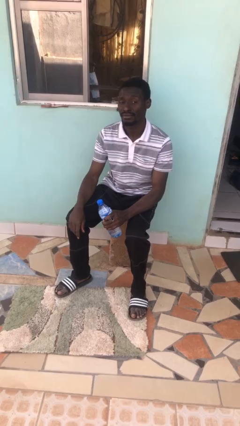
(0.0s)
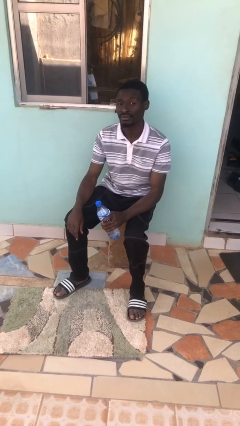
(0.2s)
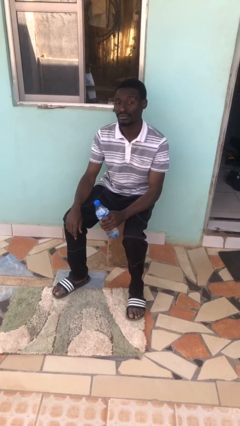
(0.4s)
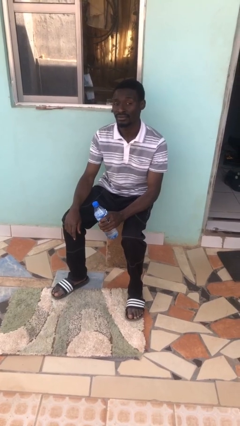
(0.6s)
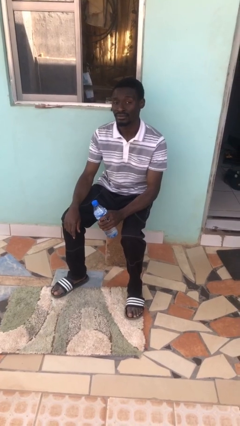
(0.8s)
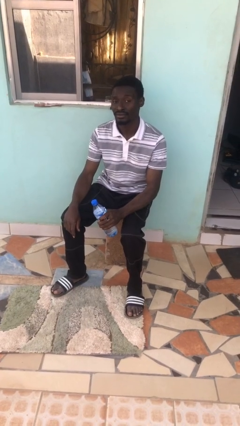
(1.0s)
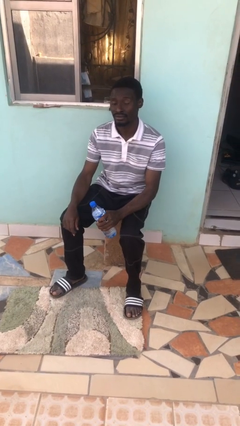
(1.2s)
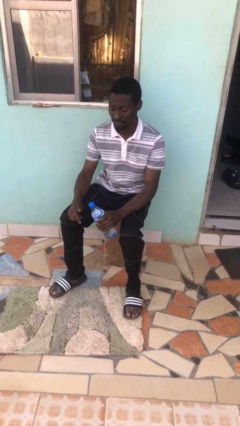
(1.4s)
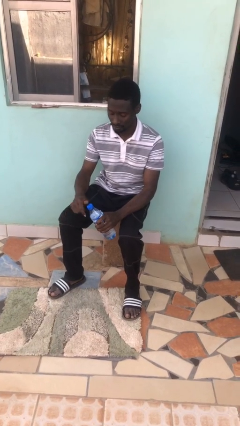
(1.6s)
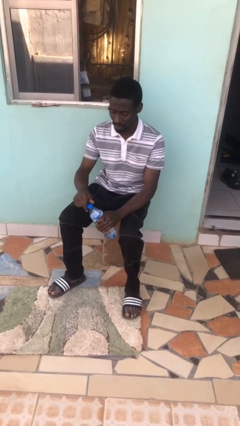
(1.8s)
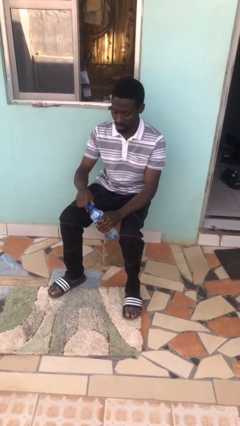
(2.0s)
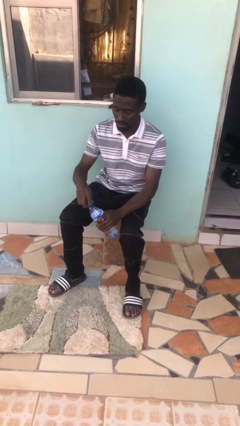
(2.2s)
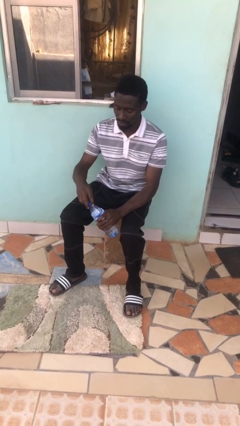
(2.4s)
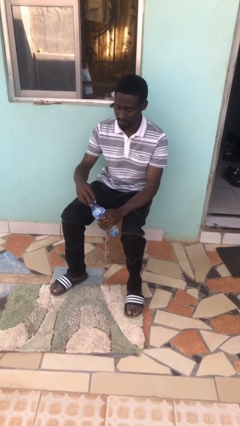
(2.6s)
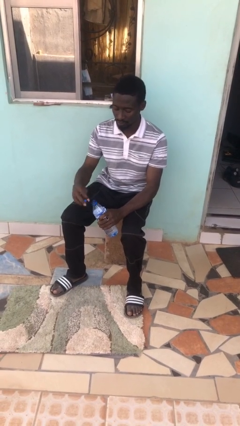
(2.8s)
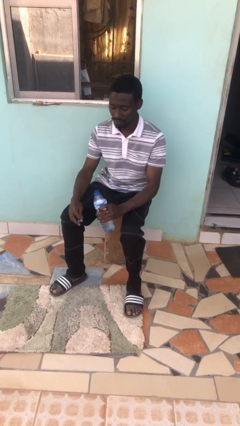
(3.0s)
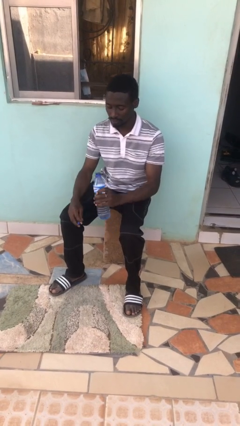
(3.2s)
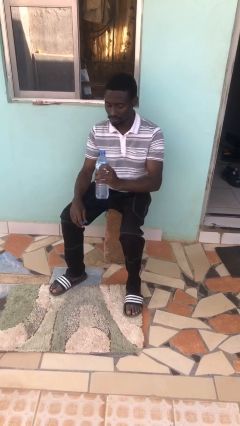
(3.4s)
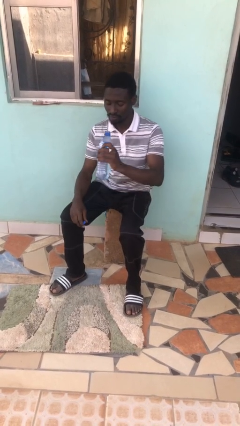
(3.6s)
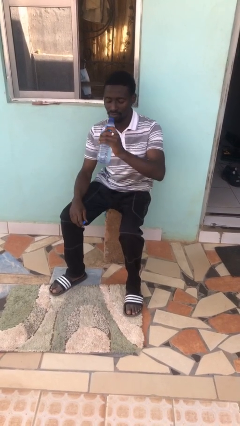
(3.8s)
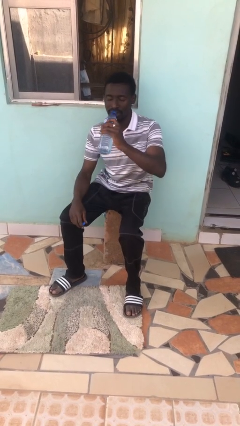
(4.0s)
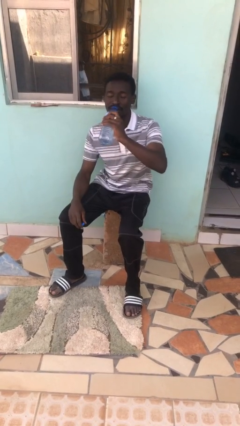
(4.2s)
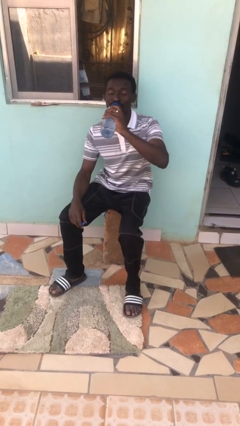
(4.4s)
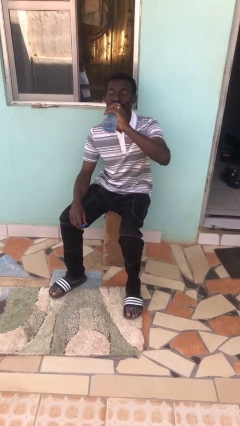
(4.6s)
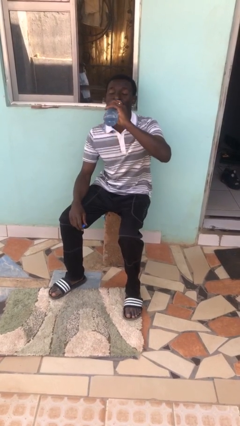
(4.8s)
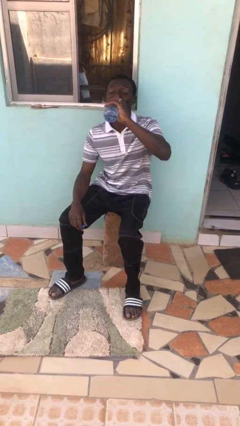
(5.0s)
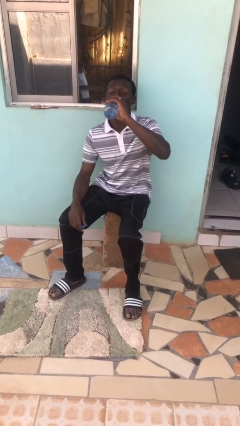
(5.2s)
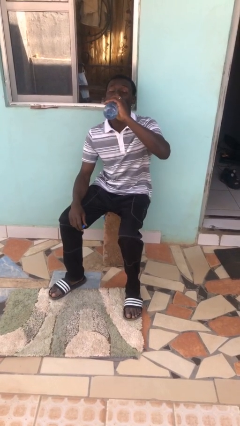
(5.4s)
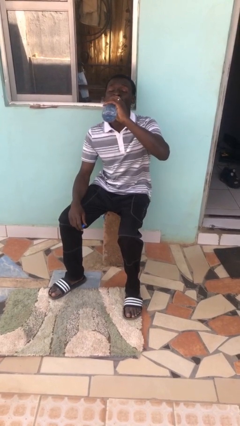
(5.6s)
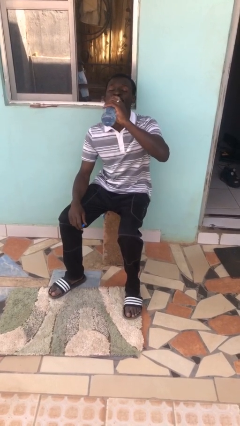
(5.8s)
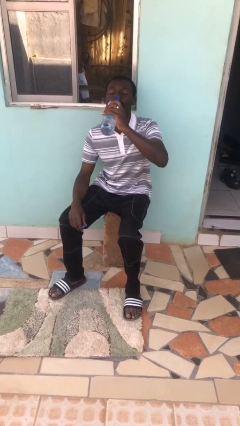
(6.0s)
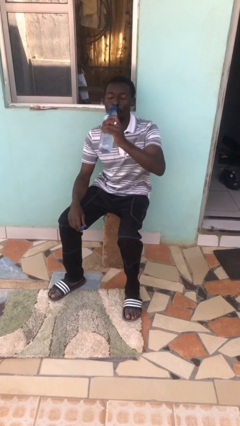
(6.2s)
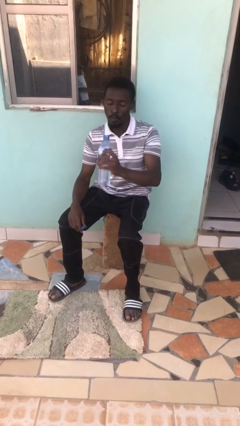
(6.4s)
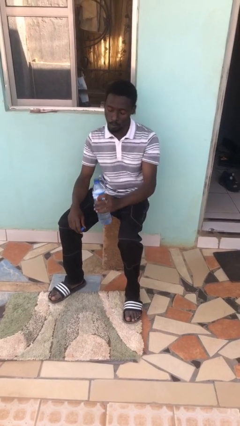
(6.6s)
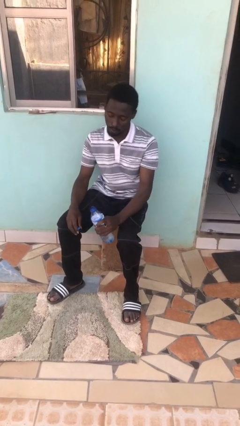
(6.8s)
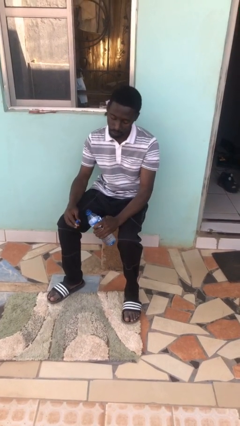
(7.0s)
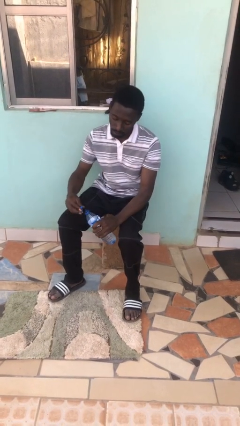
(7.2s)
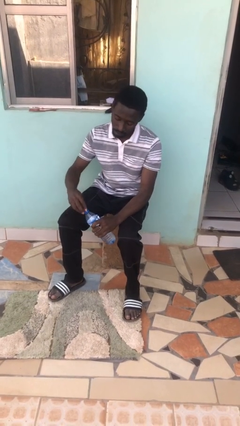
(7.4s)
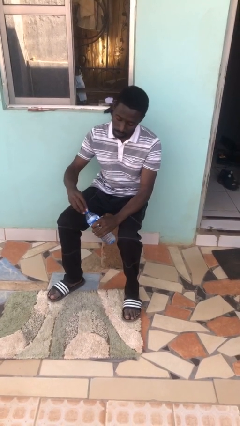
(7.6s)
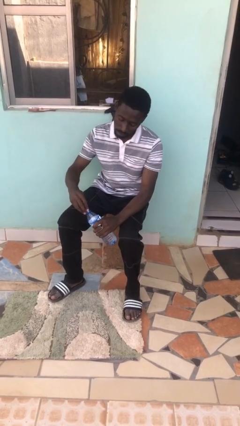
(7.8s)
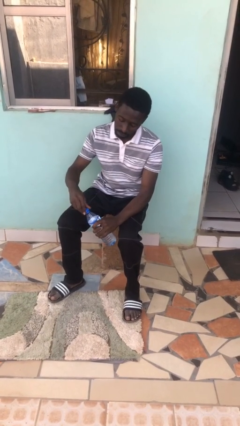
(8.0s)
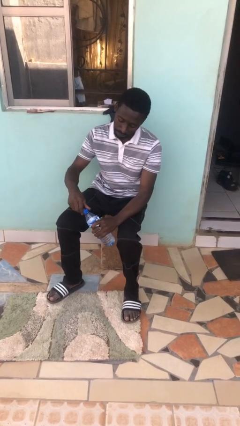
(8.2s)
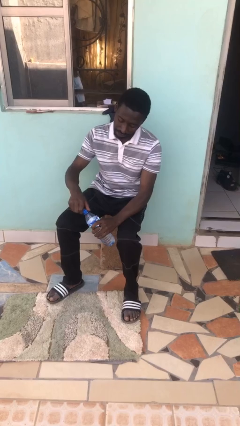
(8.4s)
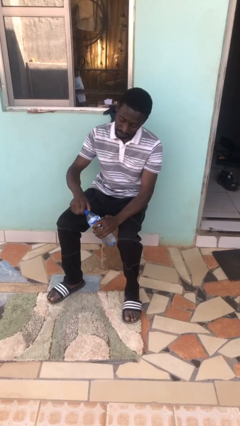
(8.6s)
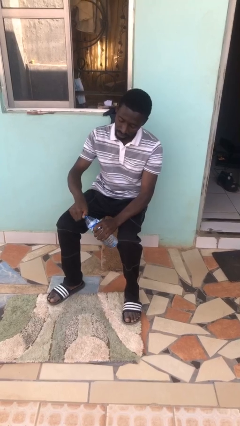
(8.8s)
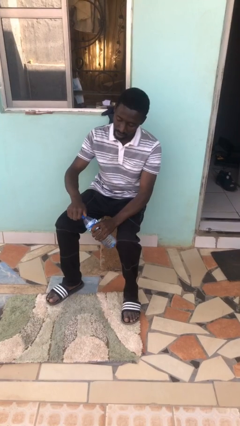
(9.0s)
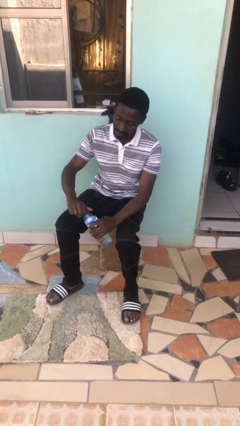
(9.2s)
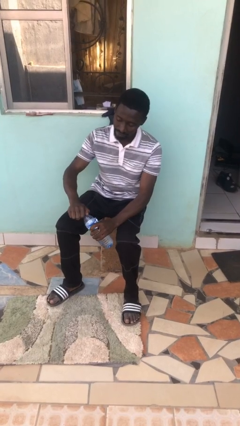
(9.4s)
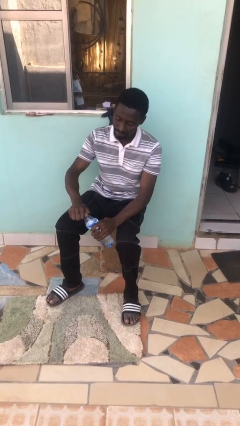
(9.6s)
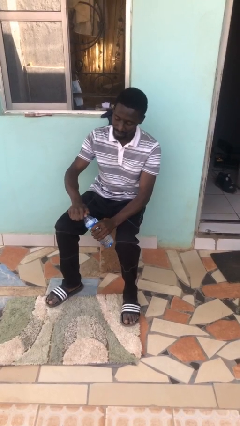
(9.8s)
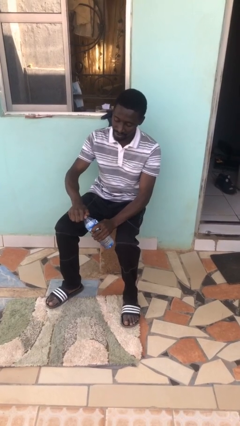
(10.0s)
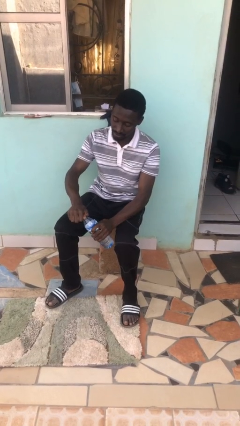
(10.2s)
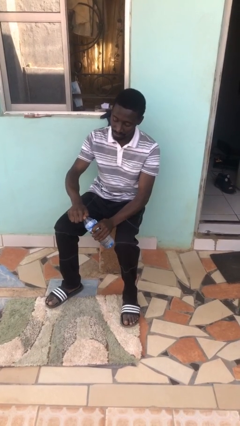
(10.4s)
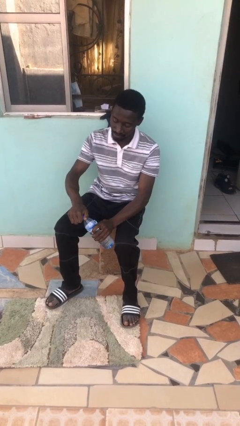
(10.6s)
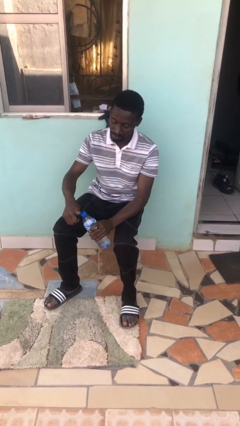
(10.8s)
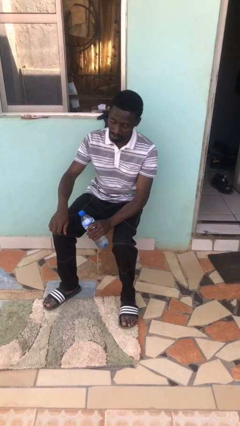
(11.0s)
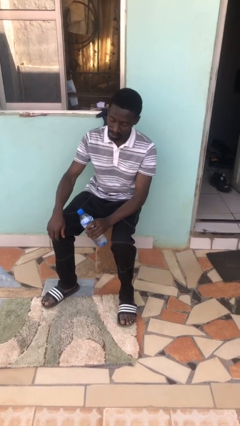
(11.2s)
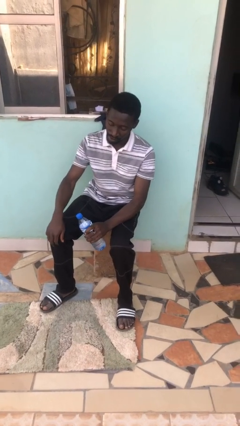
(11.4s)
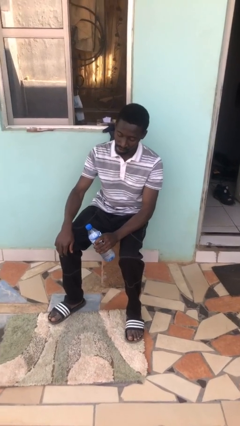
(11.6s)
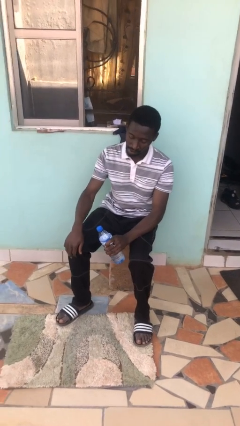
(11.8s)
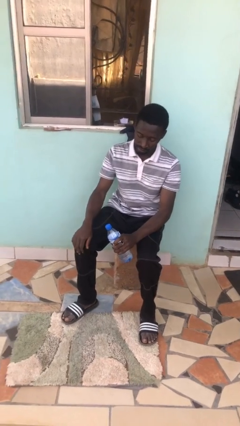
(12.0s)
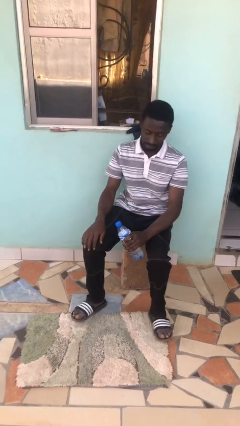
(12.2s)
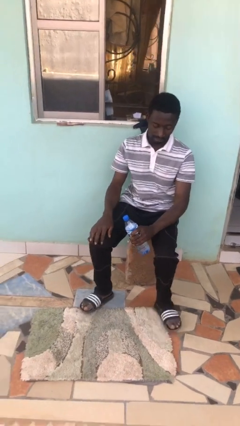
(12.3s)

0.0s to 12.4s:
person drinks from bottle

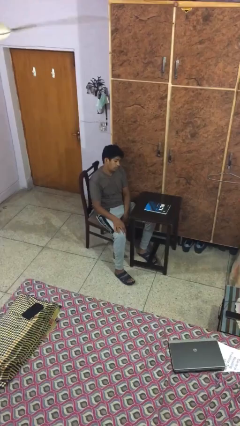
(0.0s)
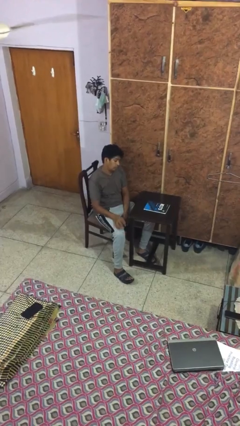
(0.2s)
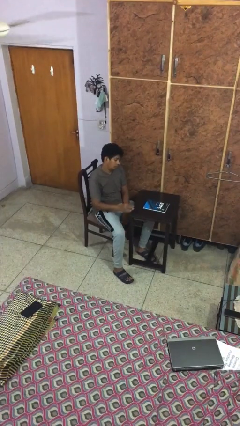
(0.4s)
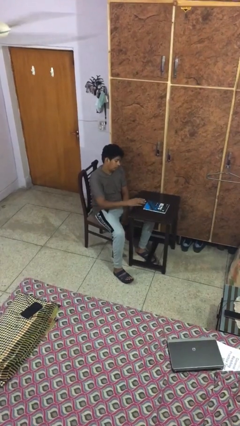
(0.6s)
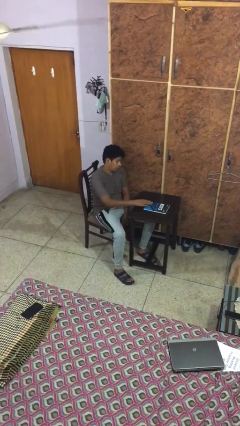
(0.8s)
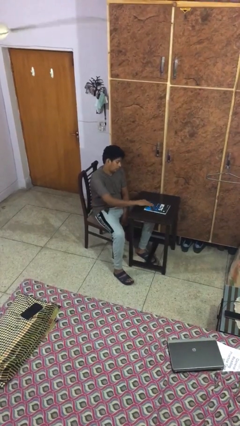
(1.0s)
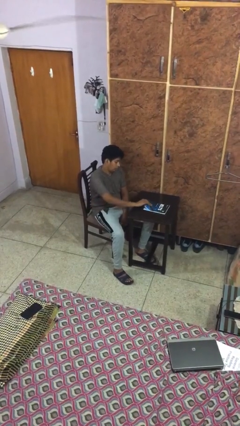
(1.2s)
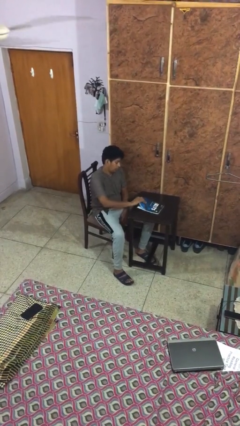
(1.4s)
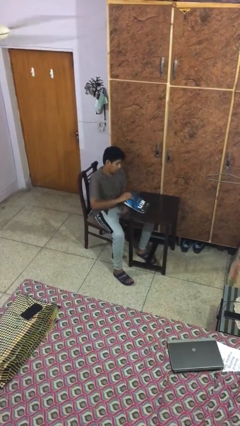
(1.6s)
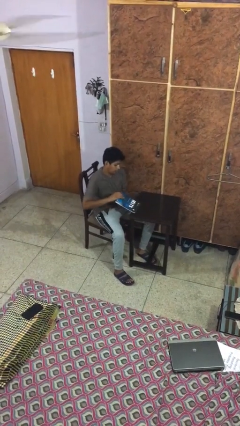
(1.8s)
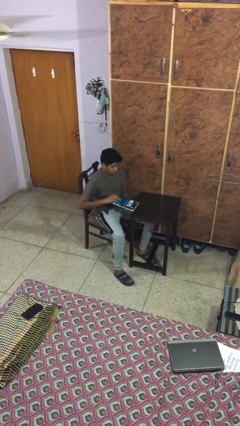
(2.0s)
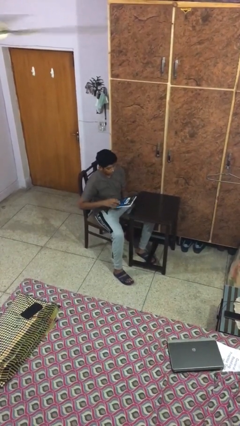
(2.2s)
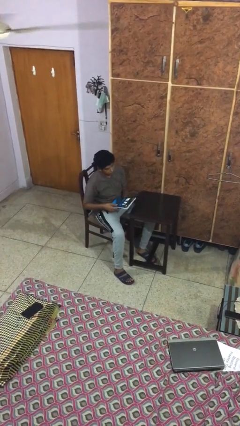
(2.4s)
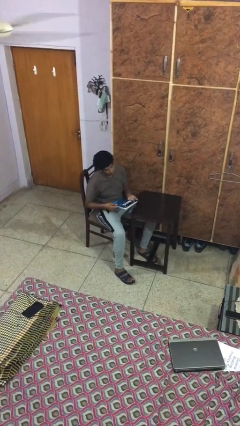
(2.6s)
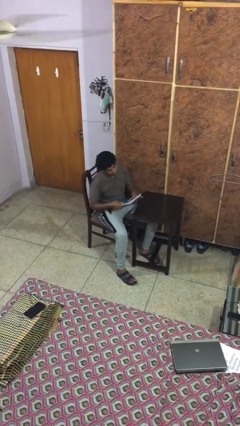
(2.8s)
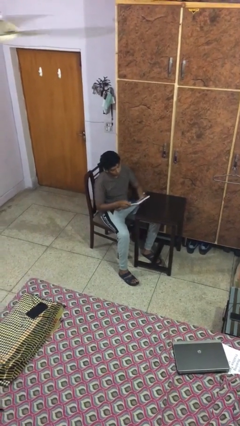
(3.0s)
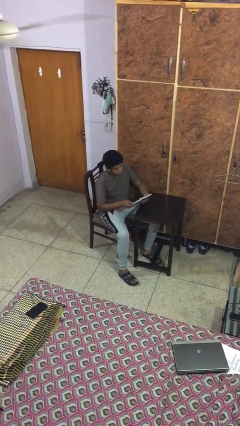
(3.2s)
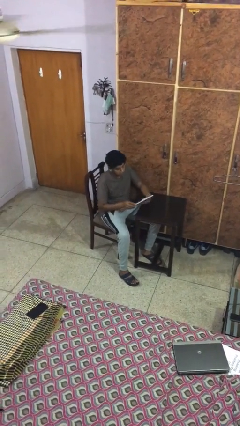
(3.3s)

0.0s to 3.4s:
person picks up object from table

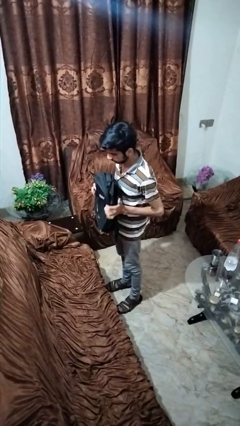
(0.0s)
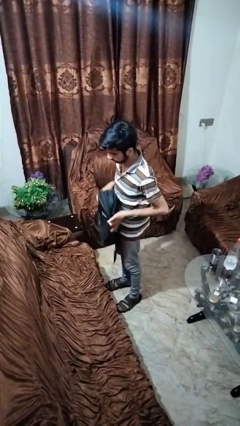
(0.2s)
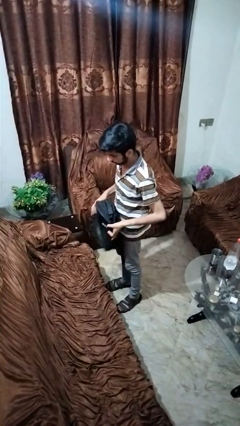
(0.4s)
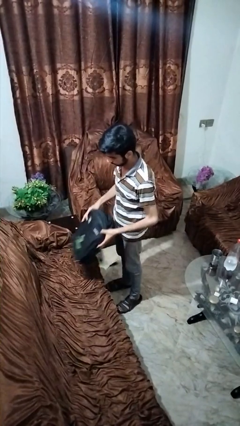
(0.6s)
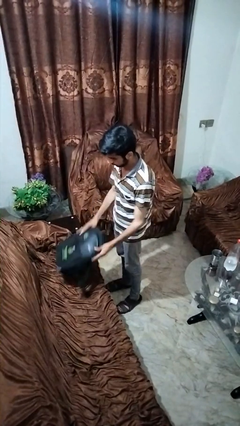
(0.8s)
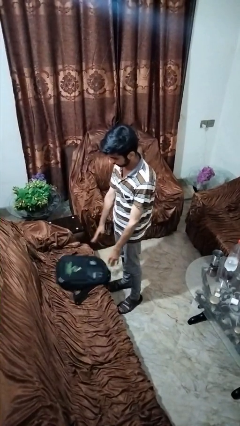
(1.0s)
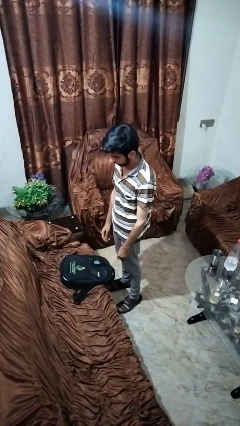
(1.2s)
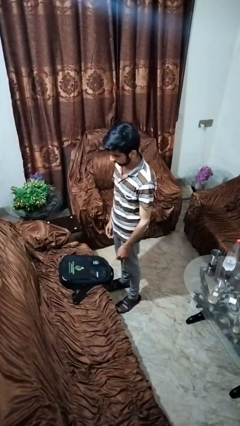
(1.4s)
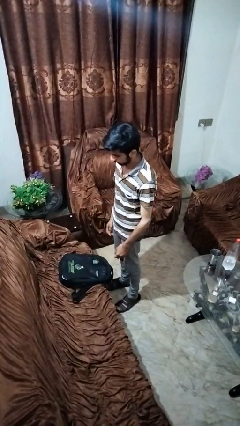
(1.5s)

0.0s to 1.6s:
person puts down object on couch

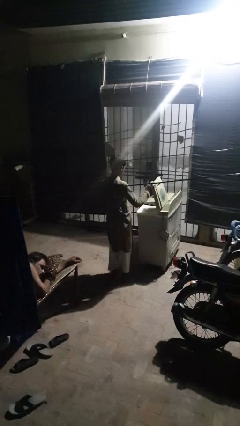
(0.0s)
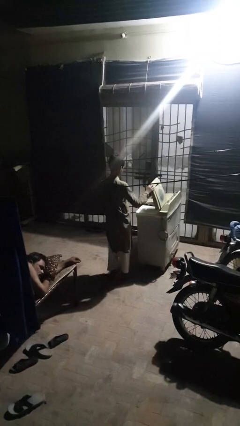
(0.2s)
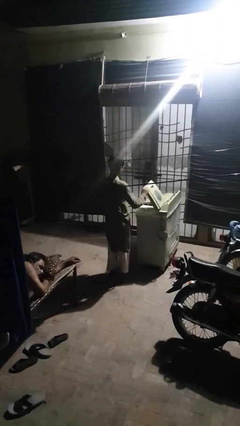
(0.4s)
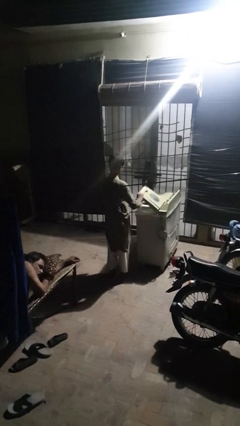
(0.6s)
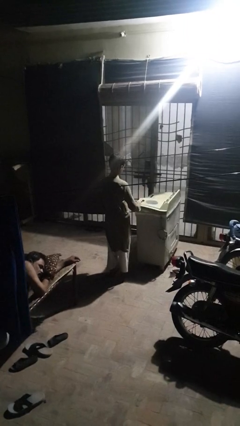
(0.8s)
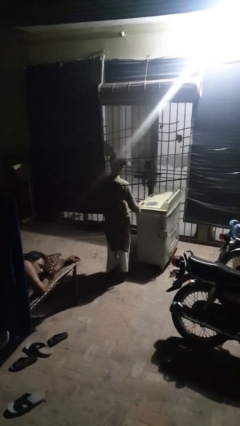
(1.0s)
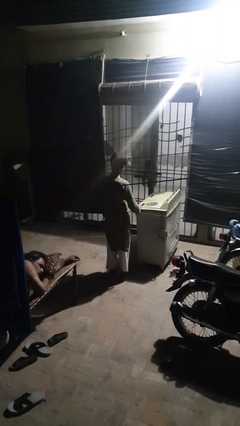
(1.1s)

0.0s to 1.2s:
person closes clothes washer
